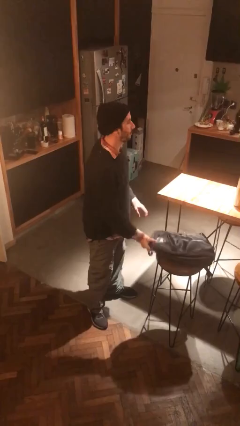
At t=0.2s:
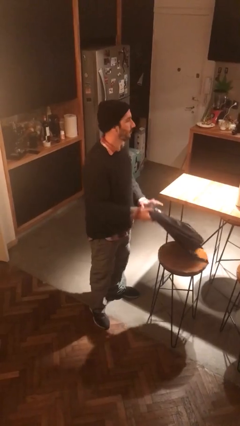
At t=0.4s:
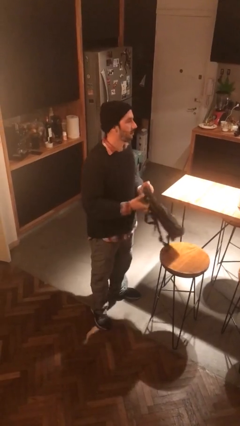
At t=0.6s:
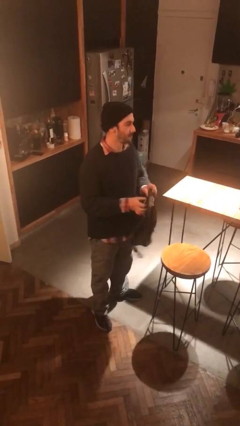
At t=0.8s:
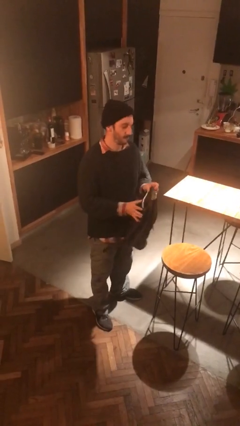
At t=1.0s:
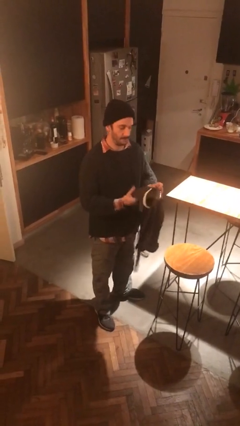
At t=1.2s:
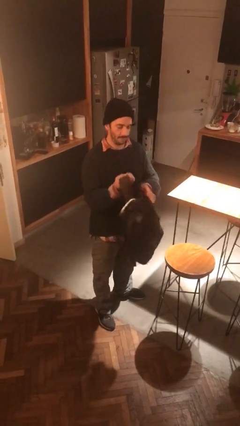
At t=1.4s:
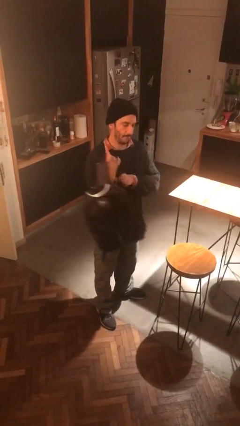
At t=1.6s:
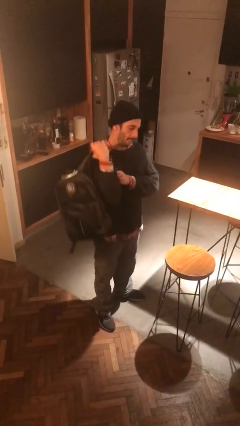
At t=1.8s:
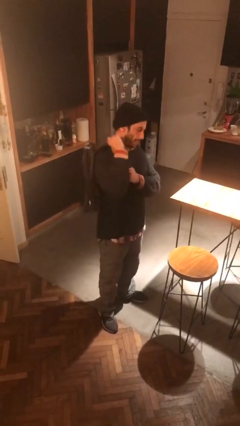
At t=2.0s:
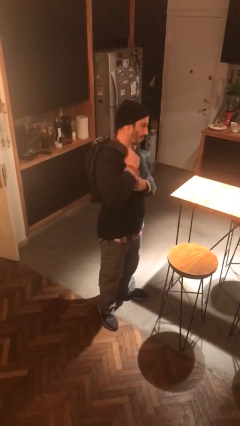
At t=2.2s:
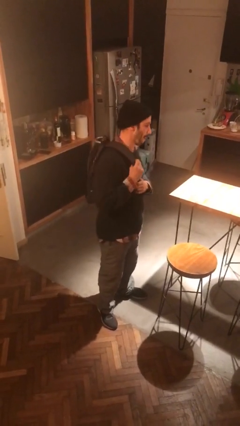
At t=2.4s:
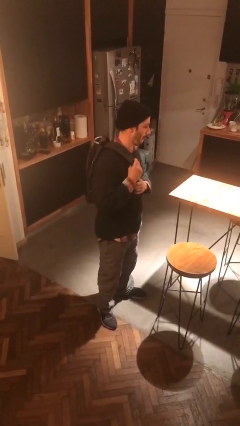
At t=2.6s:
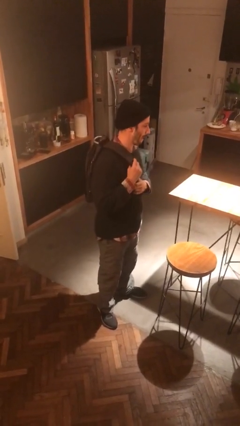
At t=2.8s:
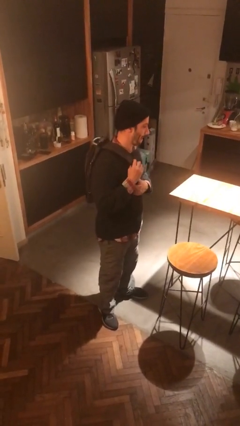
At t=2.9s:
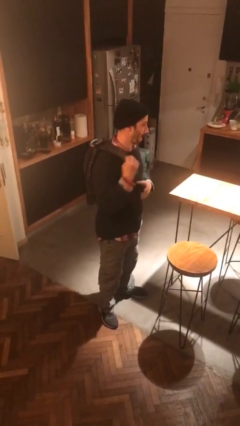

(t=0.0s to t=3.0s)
person puts on backpack

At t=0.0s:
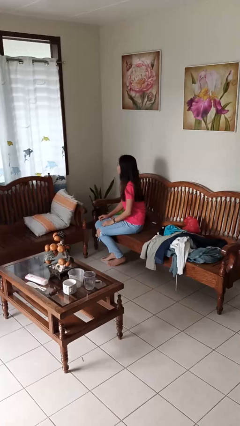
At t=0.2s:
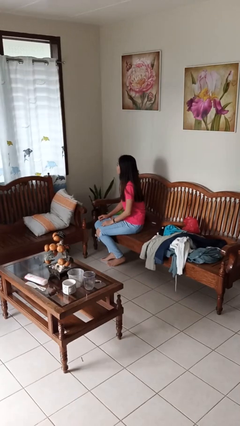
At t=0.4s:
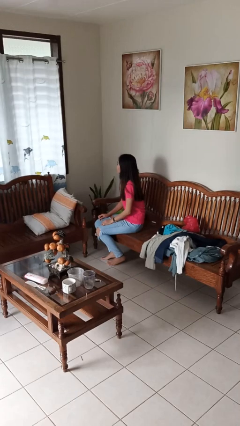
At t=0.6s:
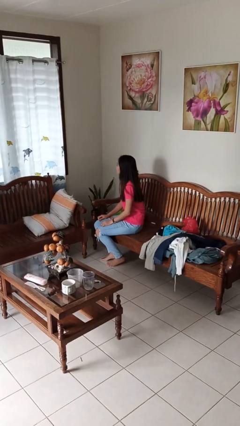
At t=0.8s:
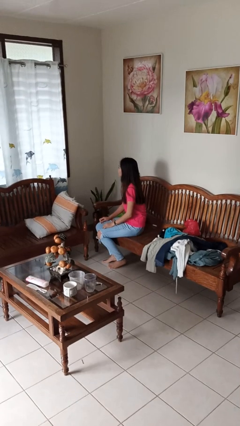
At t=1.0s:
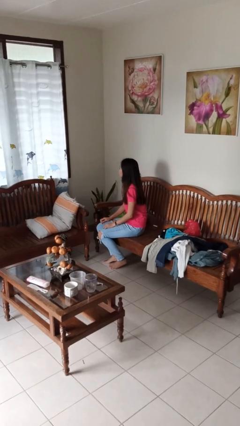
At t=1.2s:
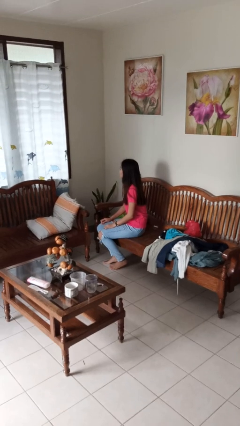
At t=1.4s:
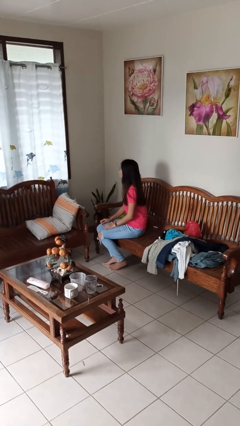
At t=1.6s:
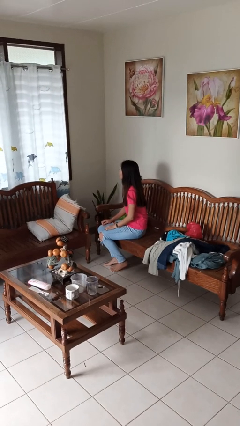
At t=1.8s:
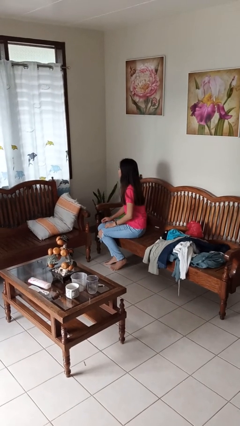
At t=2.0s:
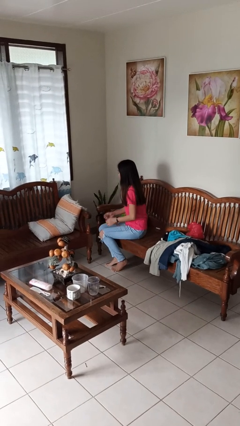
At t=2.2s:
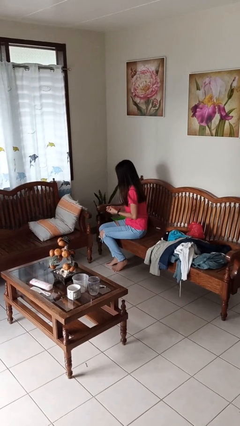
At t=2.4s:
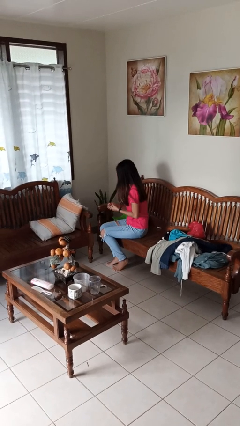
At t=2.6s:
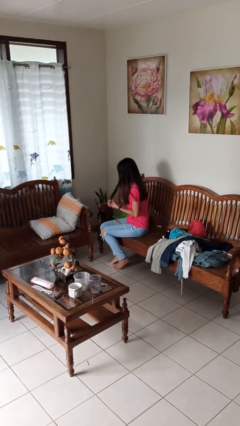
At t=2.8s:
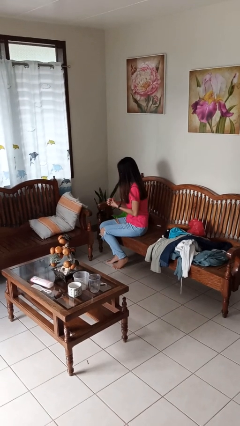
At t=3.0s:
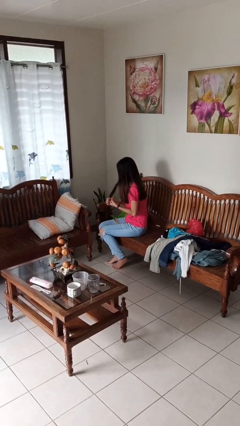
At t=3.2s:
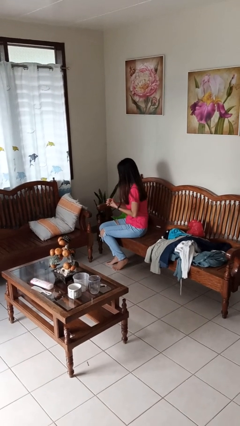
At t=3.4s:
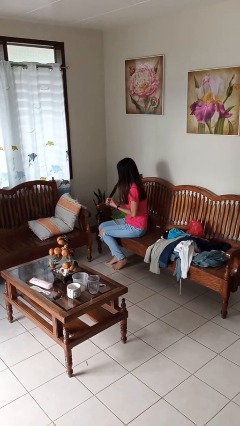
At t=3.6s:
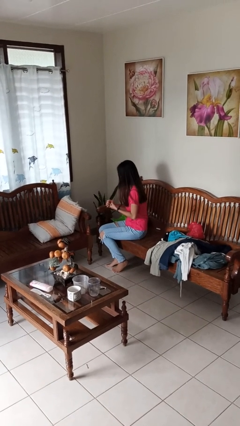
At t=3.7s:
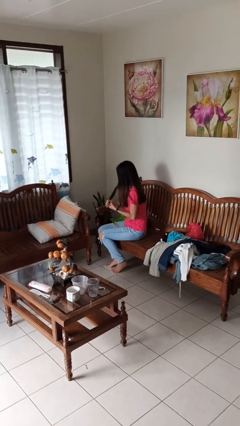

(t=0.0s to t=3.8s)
person files fingernails

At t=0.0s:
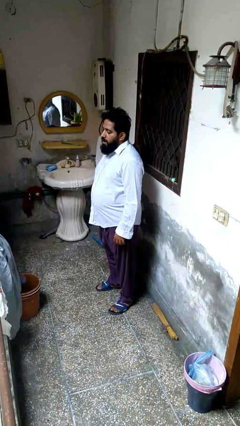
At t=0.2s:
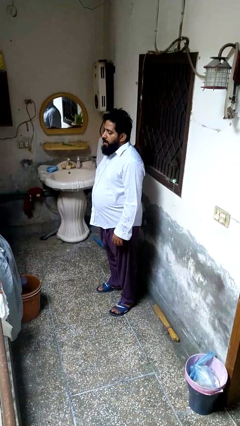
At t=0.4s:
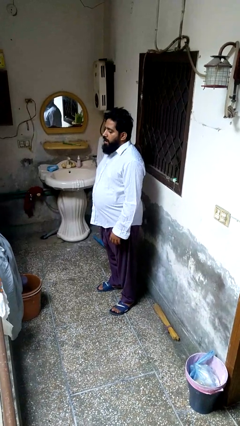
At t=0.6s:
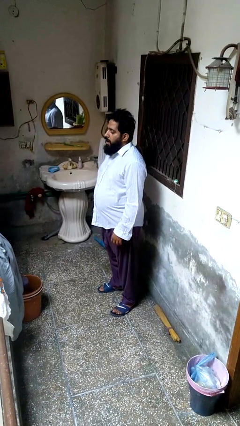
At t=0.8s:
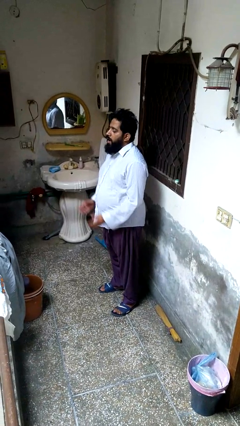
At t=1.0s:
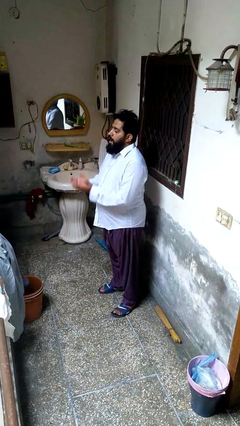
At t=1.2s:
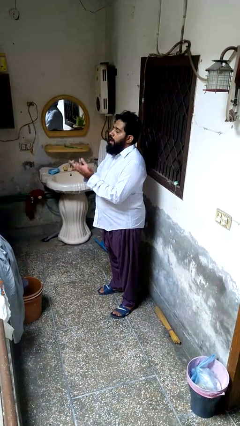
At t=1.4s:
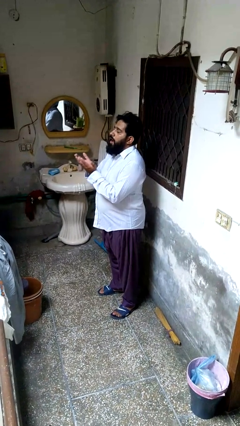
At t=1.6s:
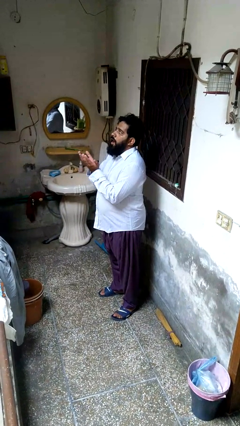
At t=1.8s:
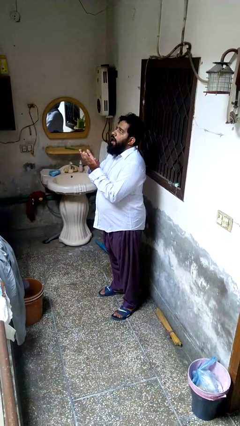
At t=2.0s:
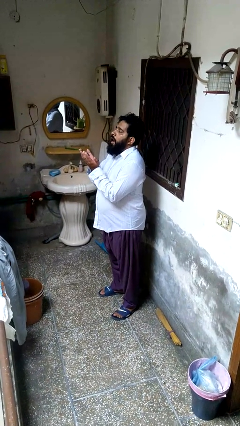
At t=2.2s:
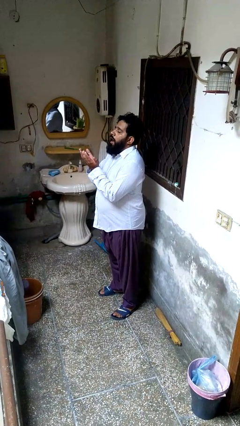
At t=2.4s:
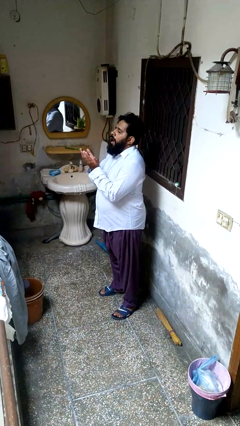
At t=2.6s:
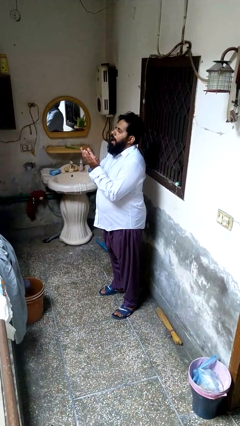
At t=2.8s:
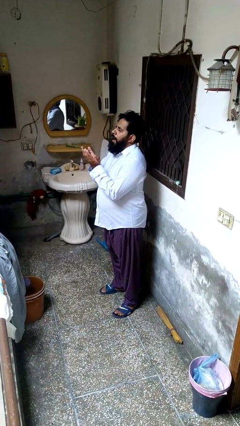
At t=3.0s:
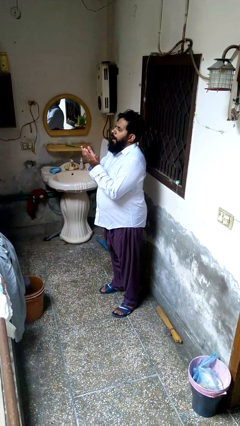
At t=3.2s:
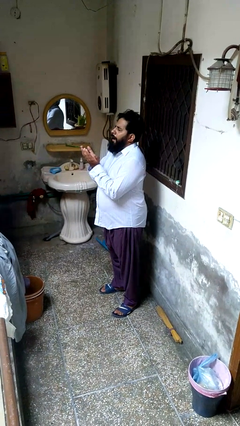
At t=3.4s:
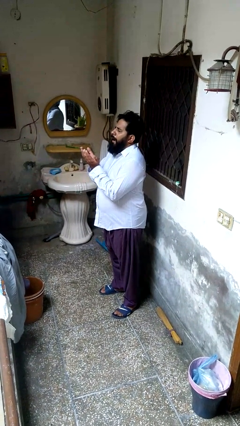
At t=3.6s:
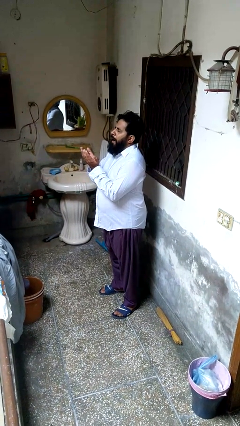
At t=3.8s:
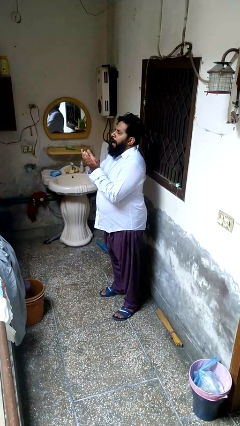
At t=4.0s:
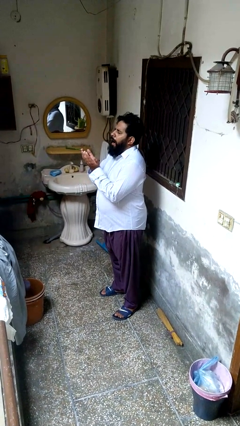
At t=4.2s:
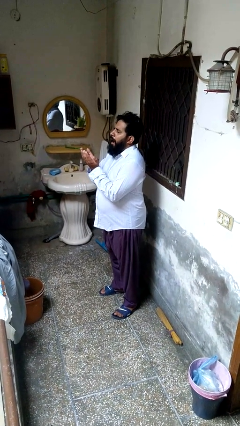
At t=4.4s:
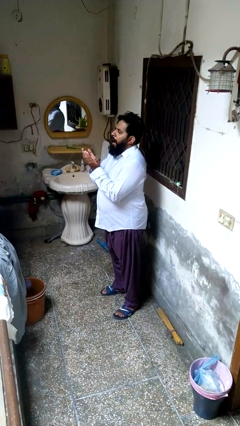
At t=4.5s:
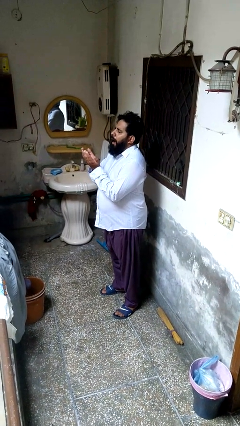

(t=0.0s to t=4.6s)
person prays

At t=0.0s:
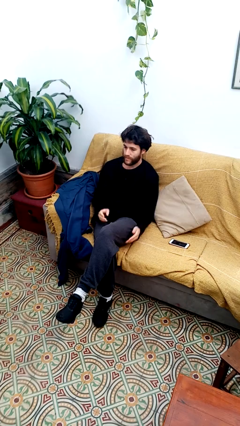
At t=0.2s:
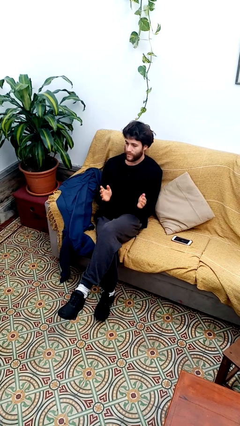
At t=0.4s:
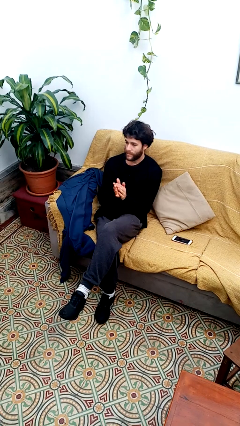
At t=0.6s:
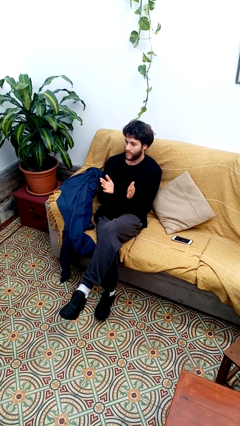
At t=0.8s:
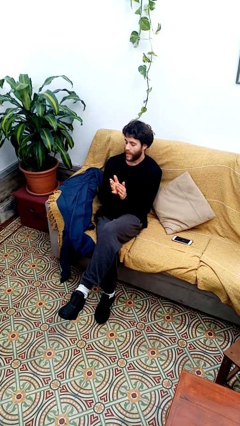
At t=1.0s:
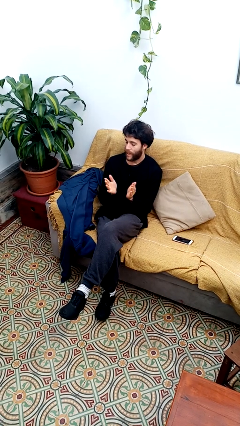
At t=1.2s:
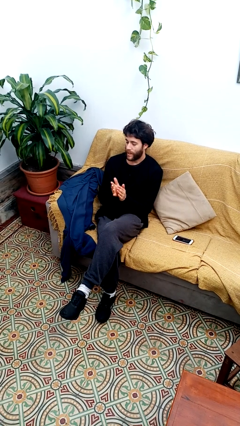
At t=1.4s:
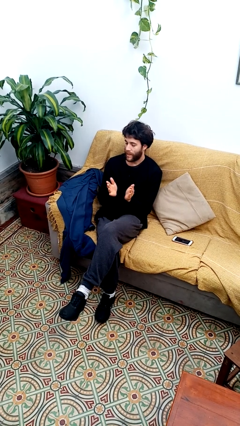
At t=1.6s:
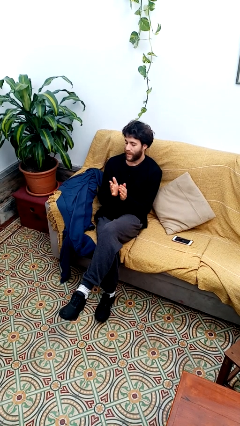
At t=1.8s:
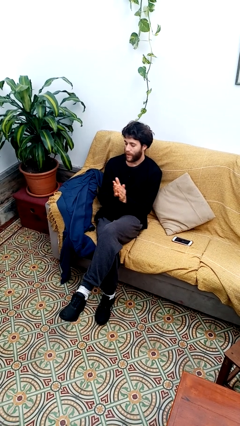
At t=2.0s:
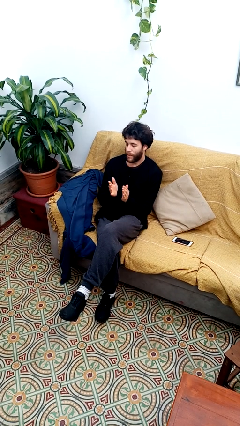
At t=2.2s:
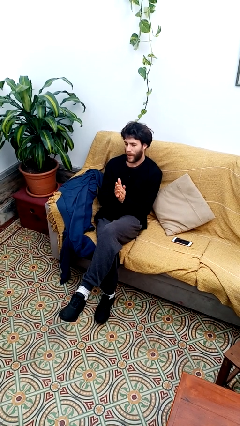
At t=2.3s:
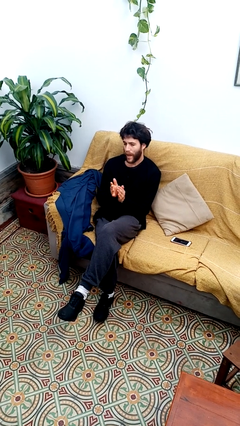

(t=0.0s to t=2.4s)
person claps hands

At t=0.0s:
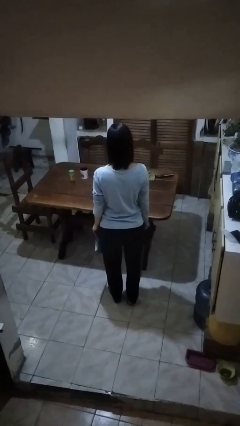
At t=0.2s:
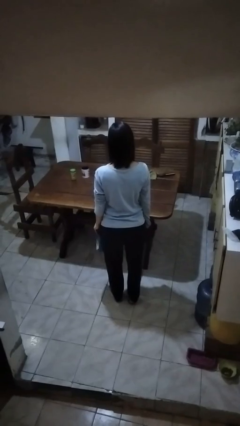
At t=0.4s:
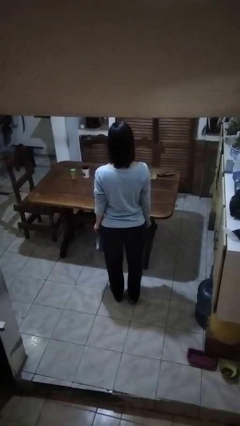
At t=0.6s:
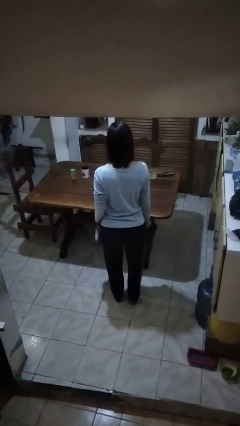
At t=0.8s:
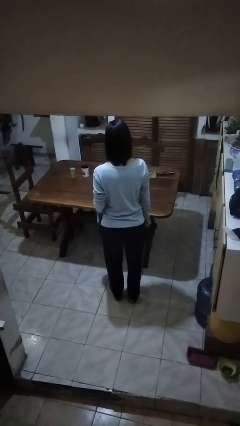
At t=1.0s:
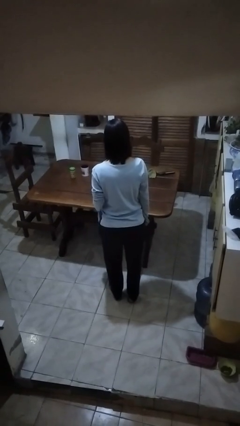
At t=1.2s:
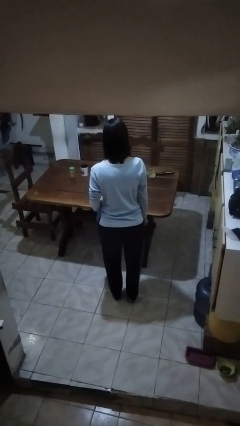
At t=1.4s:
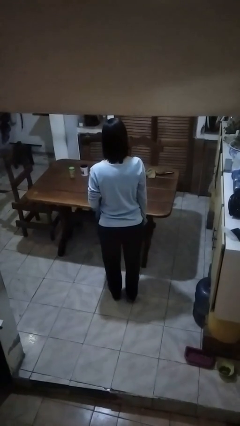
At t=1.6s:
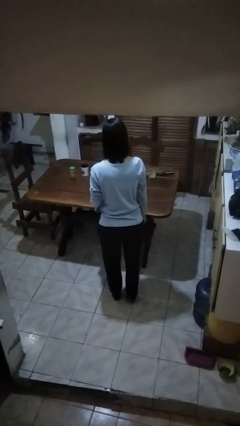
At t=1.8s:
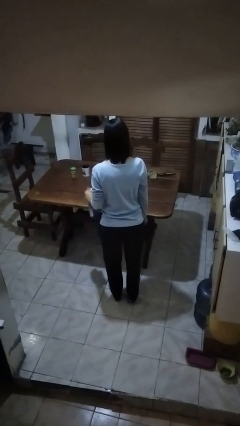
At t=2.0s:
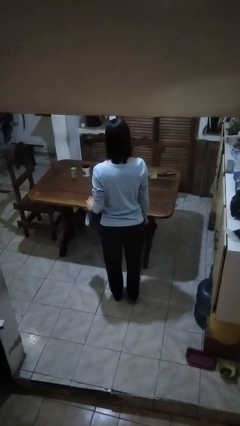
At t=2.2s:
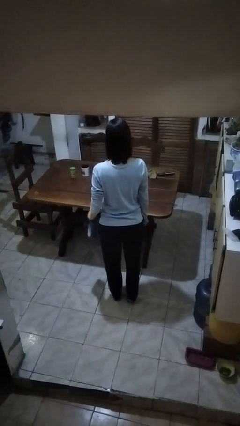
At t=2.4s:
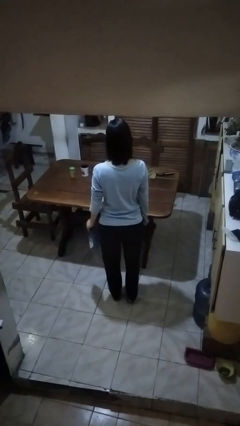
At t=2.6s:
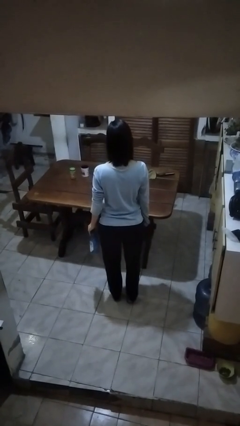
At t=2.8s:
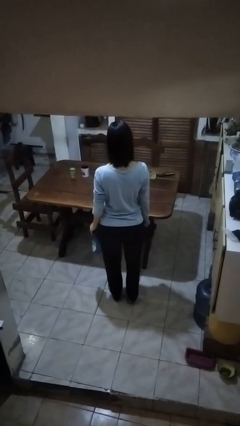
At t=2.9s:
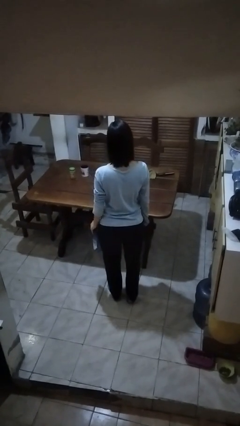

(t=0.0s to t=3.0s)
person sprays from bottle
